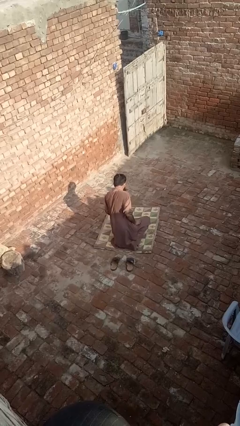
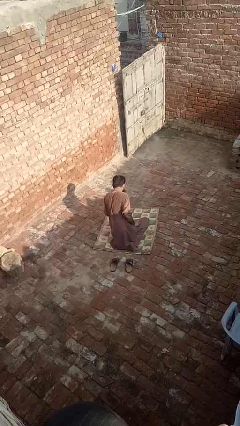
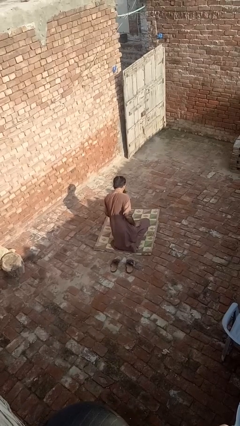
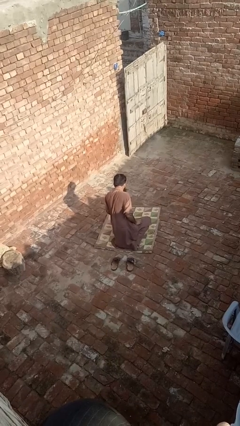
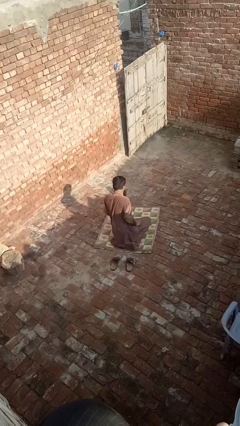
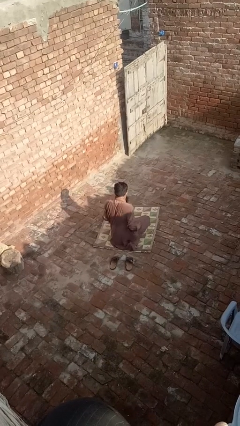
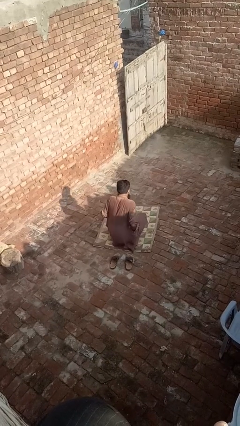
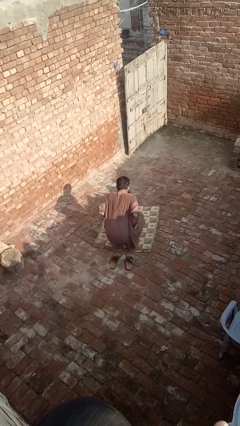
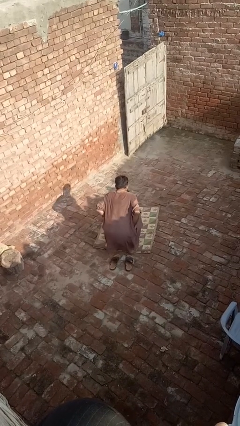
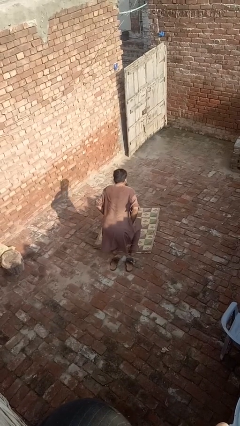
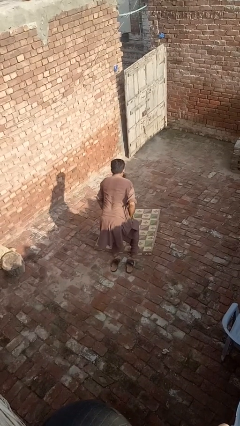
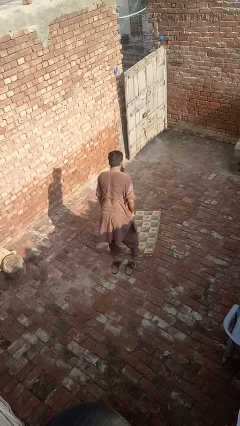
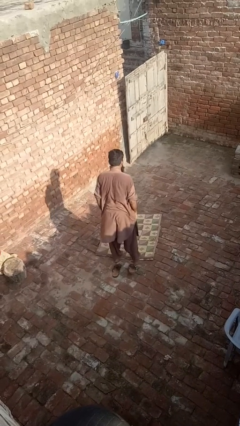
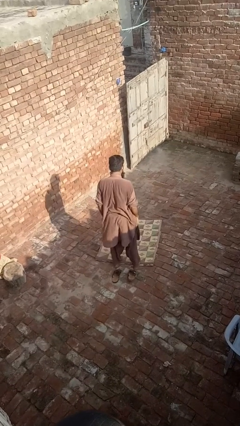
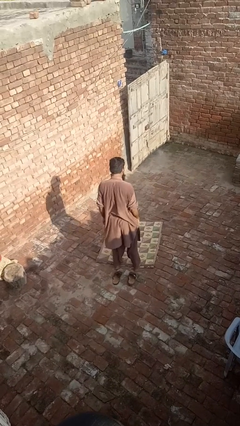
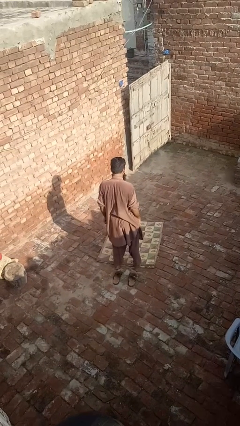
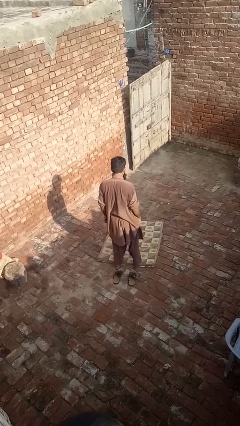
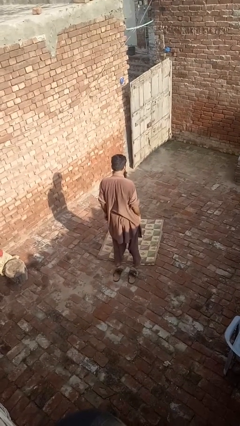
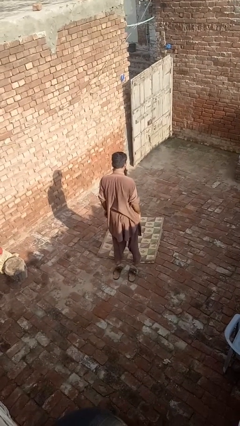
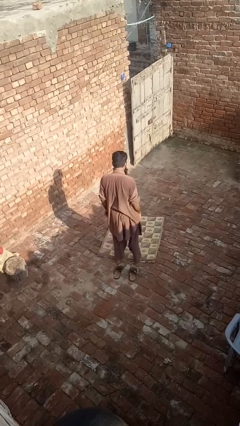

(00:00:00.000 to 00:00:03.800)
person stands up from floor

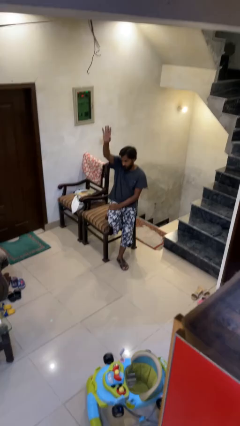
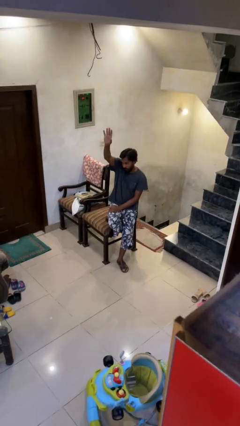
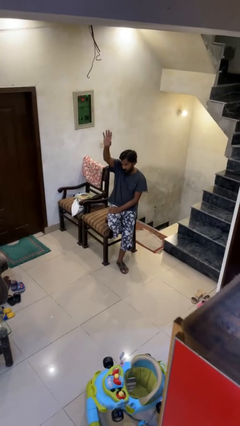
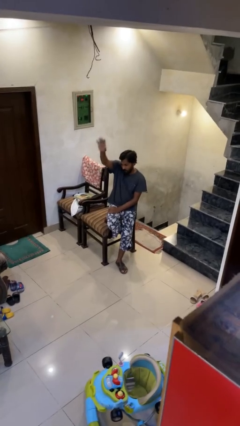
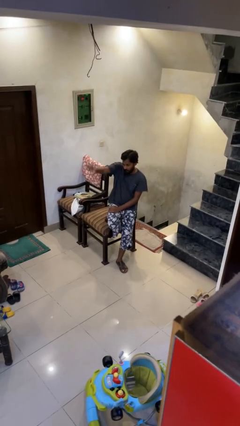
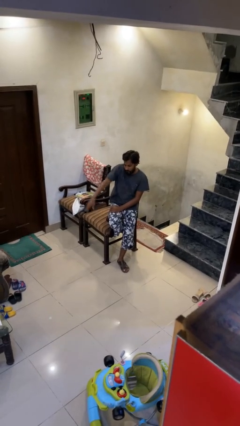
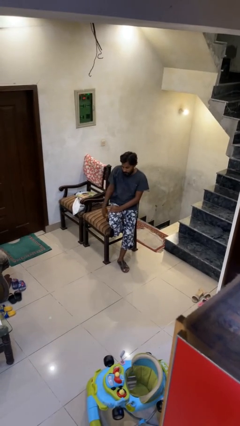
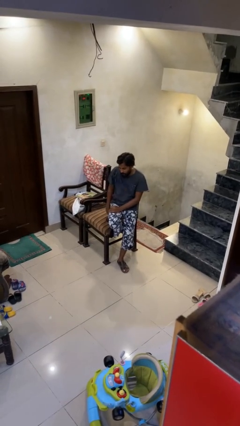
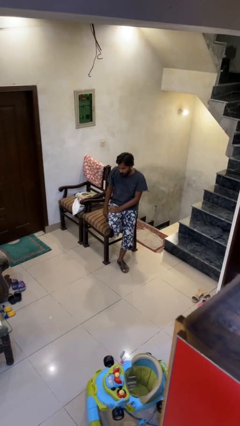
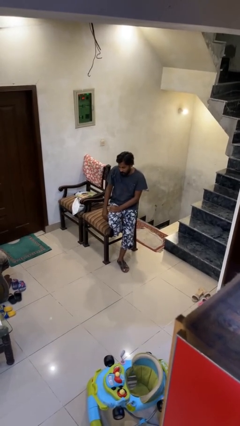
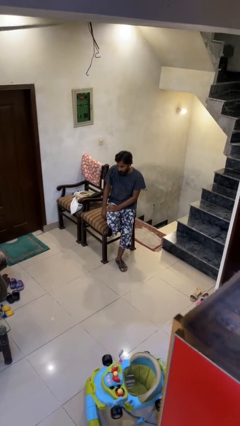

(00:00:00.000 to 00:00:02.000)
person gestures lower hand

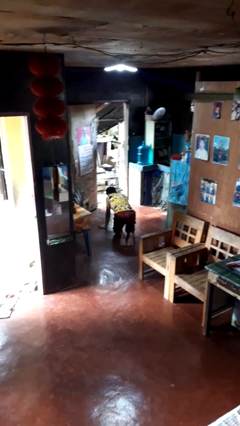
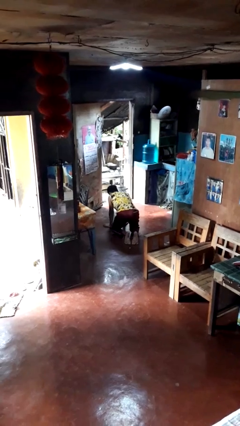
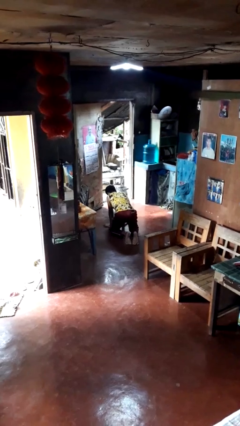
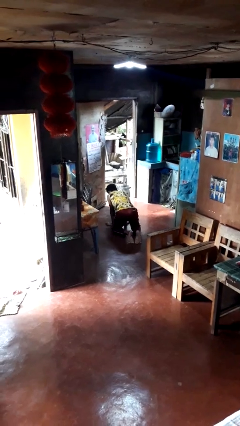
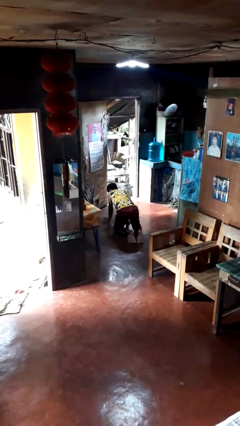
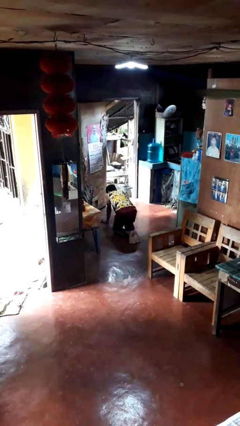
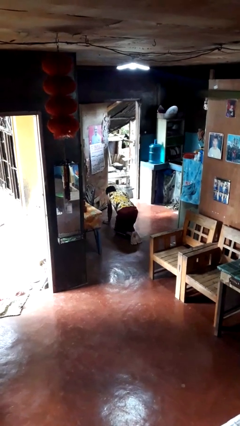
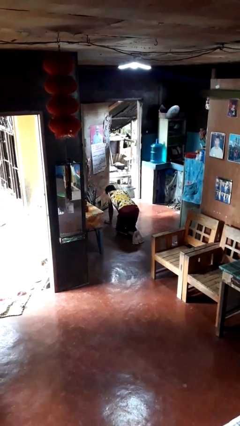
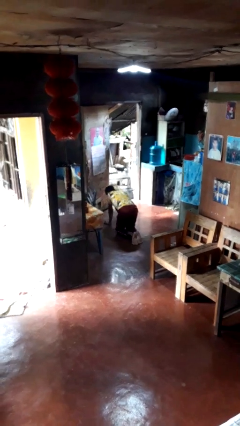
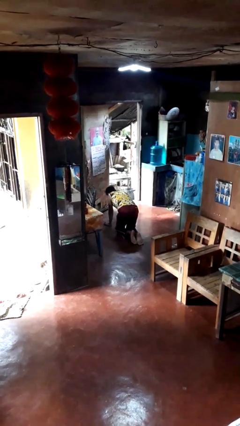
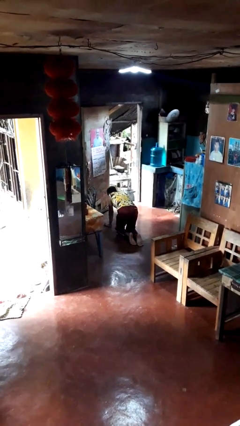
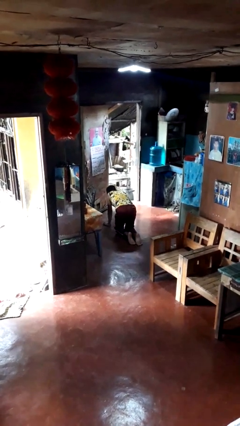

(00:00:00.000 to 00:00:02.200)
person crawls

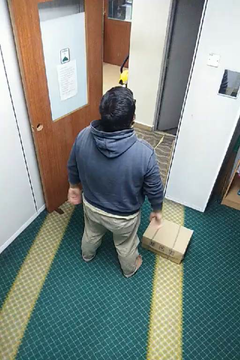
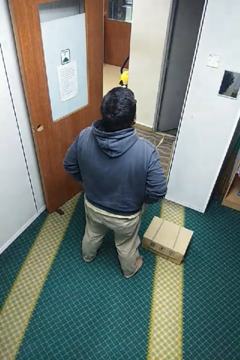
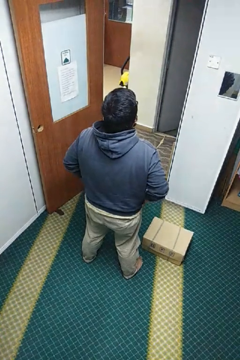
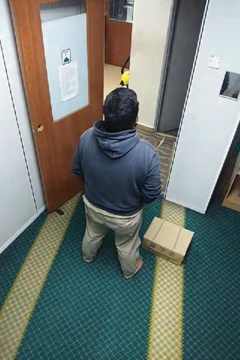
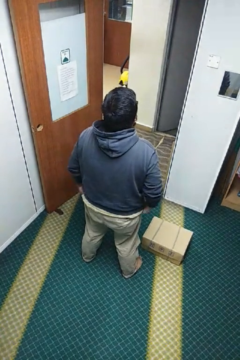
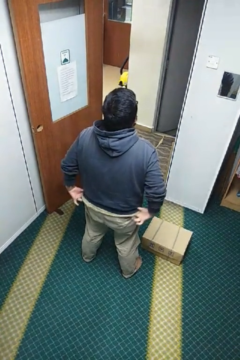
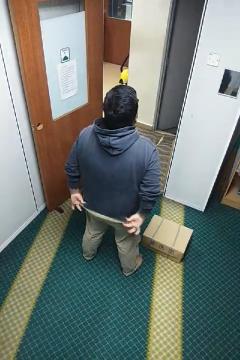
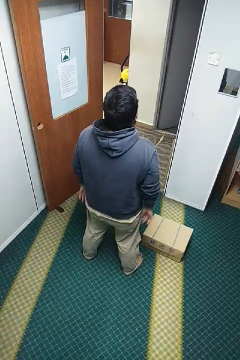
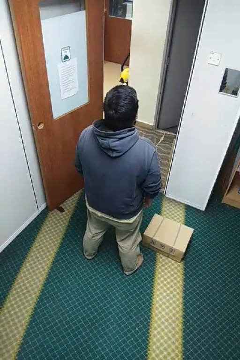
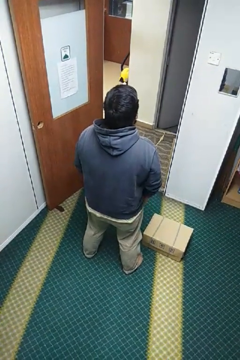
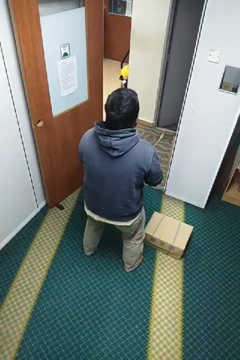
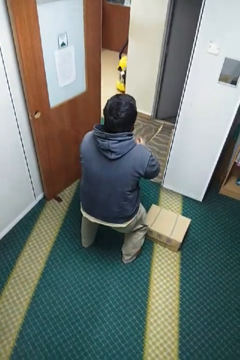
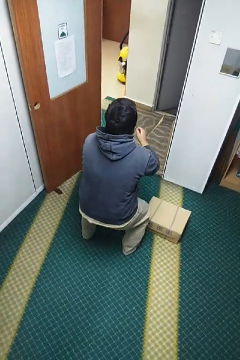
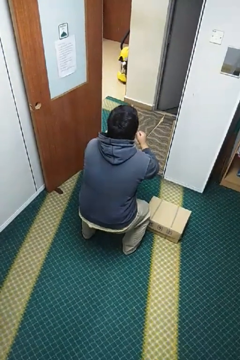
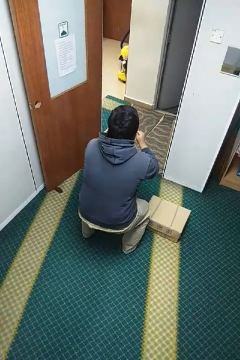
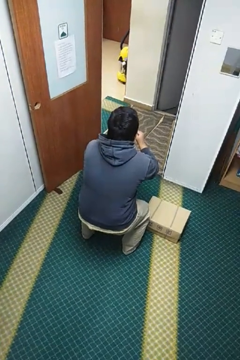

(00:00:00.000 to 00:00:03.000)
person squats

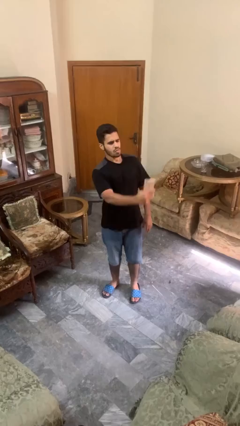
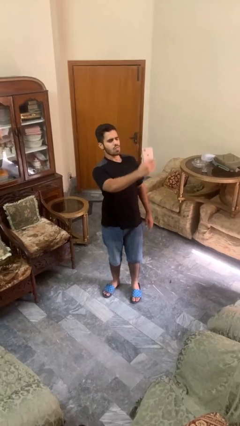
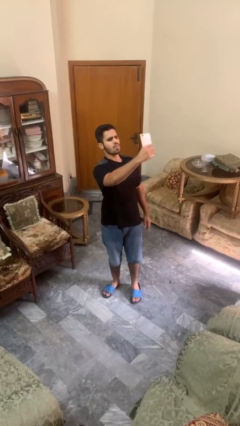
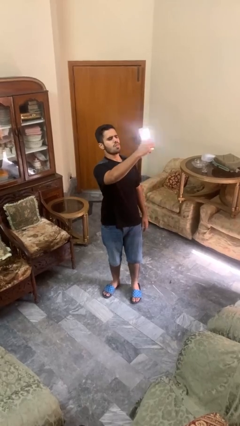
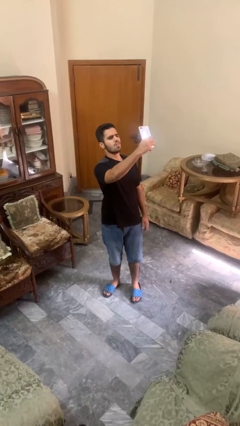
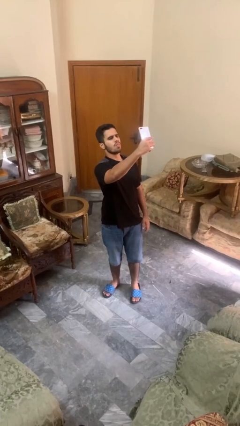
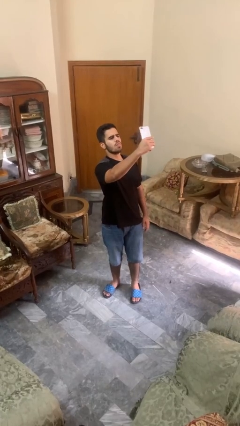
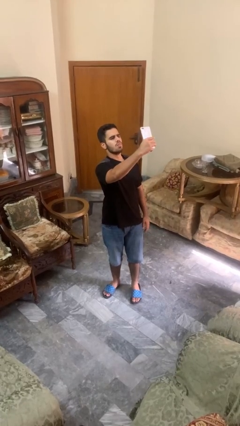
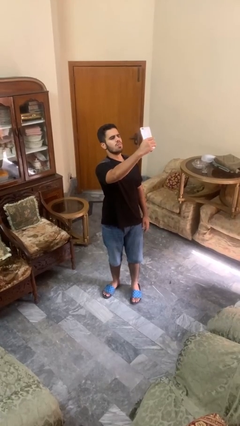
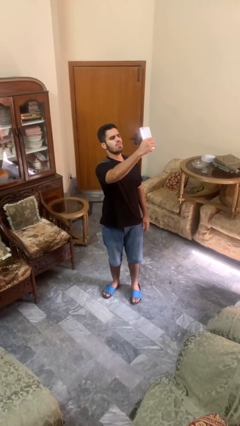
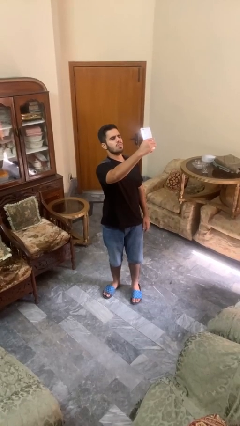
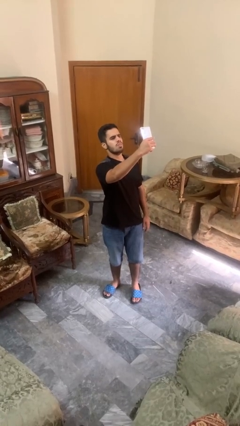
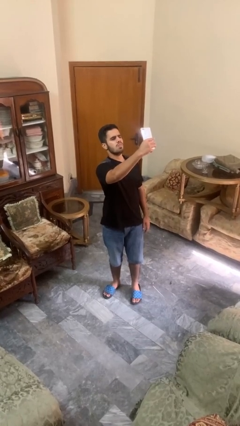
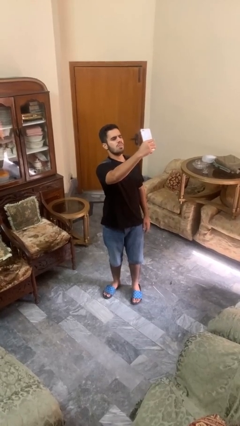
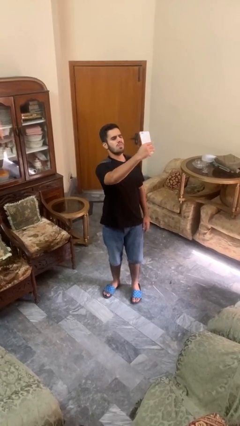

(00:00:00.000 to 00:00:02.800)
person takes selfie

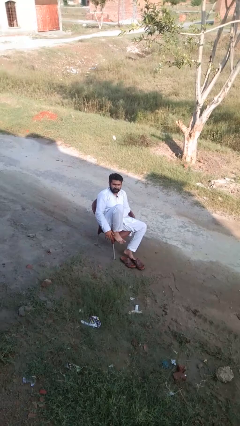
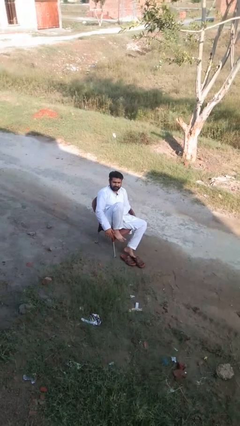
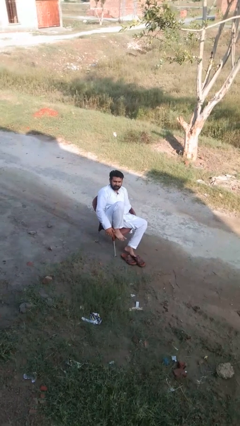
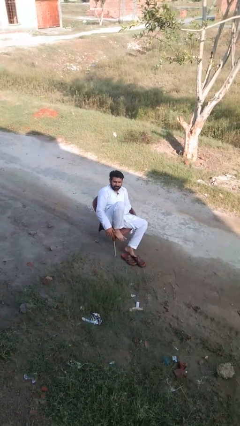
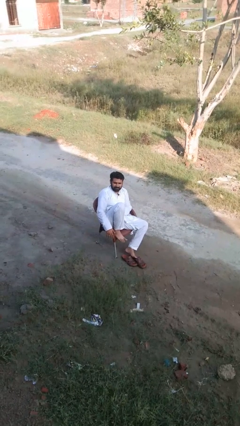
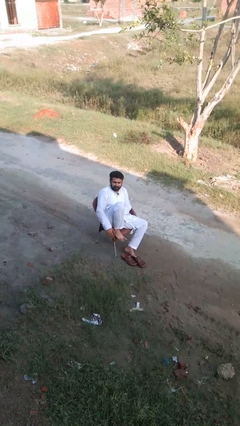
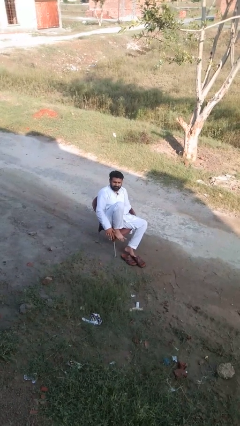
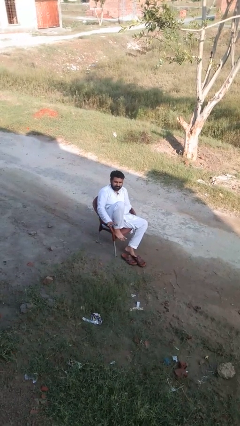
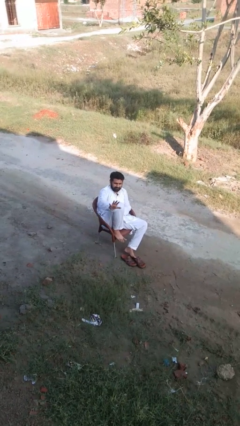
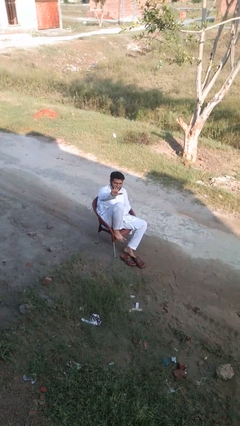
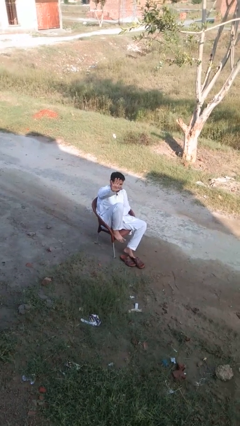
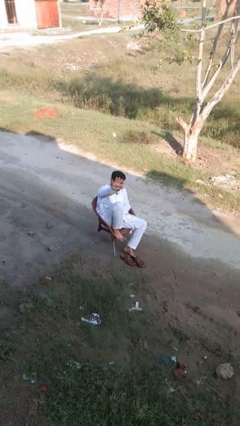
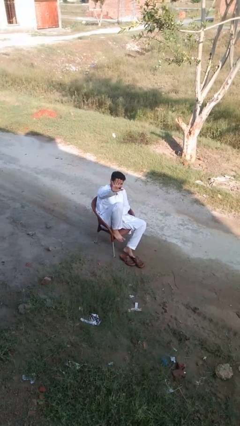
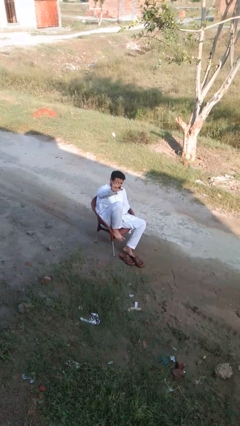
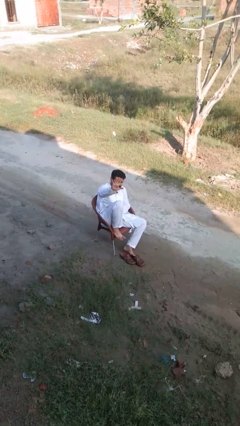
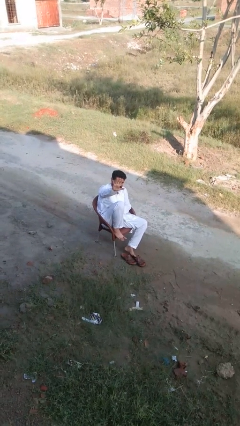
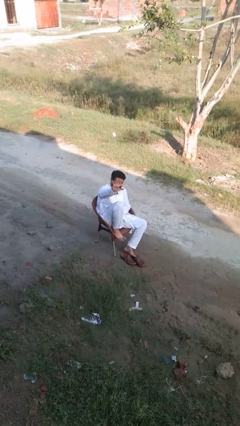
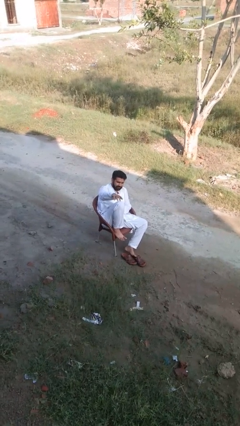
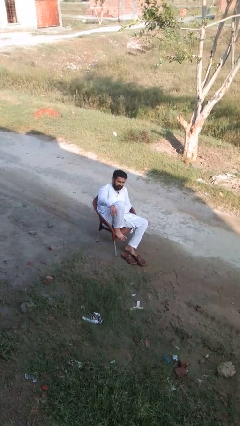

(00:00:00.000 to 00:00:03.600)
person gestures number five
